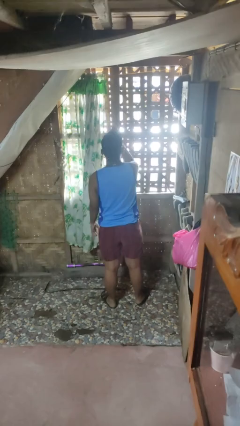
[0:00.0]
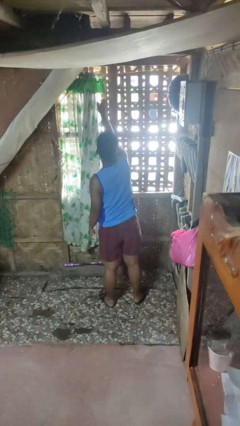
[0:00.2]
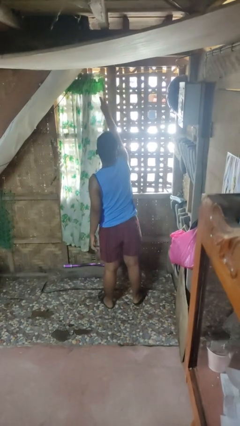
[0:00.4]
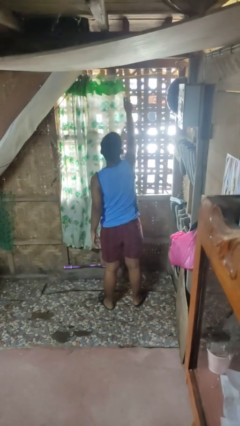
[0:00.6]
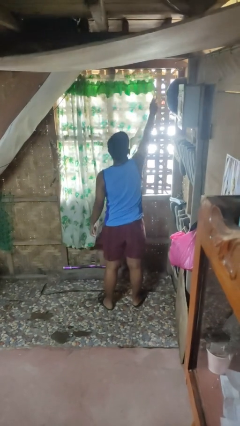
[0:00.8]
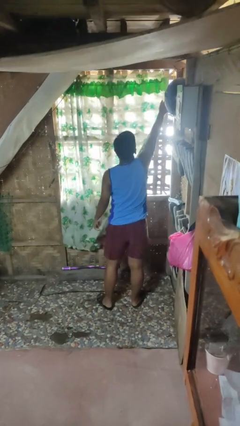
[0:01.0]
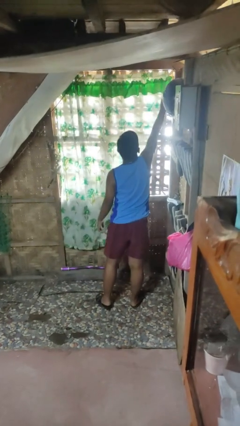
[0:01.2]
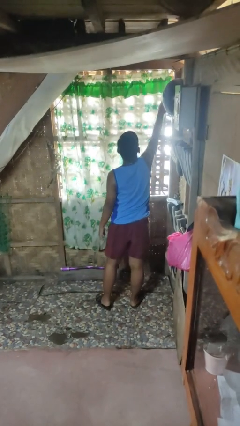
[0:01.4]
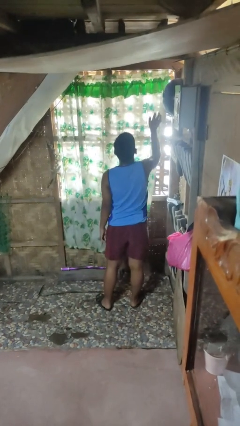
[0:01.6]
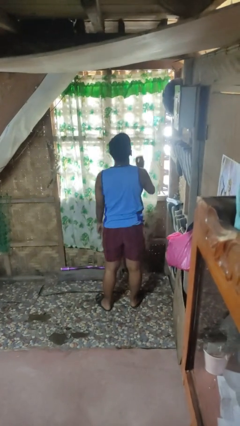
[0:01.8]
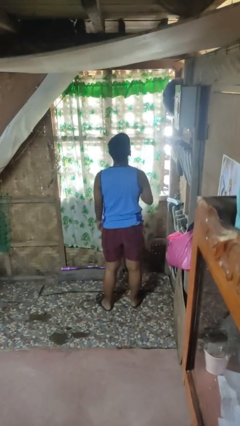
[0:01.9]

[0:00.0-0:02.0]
person closes curtains

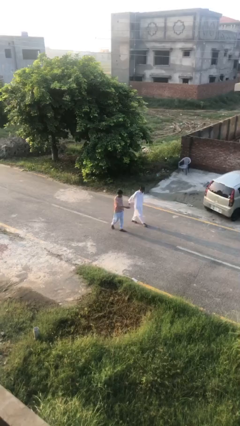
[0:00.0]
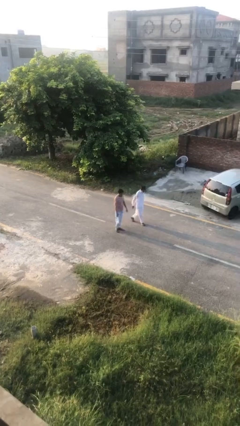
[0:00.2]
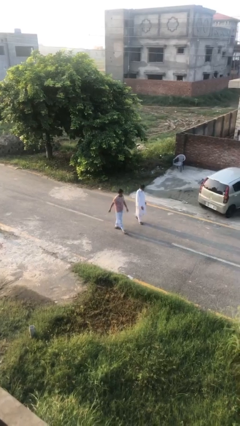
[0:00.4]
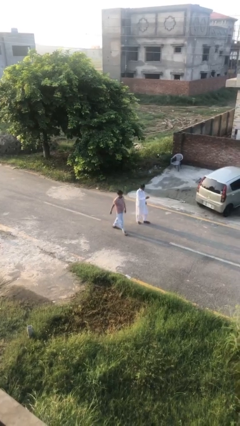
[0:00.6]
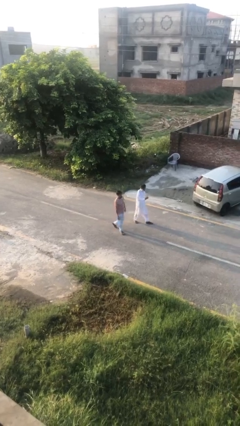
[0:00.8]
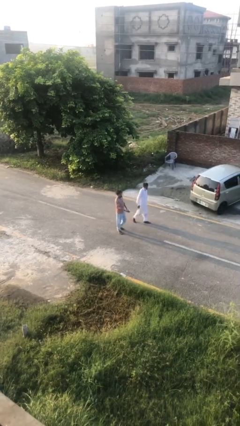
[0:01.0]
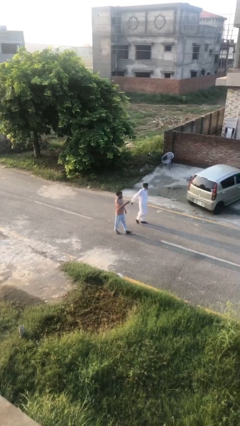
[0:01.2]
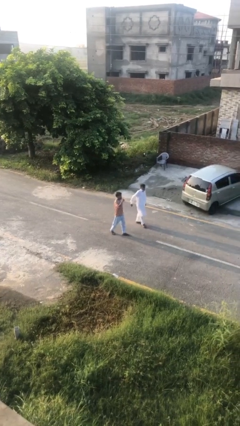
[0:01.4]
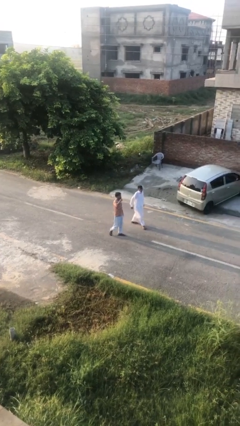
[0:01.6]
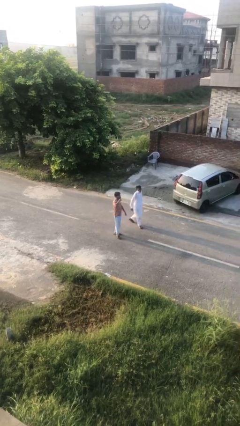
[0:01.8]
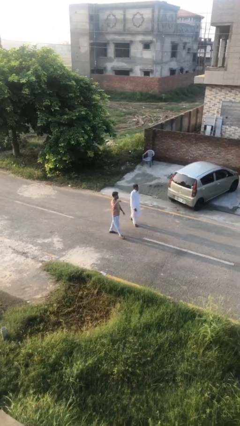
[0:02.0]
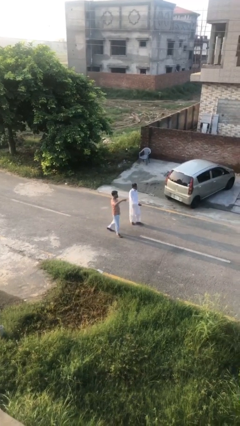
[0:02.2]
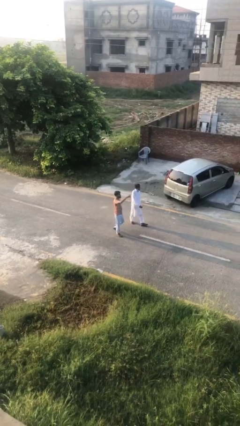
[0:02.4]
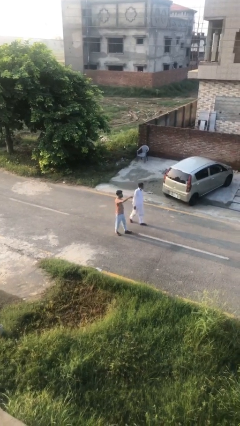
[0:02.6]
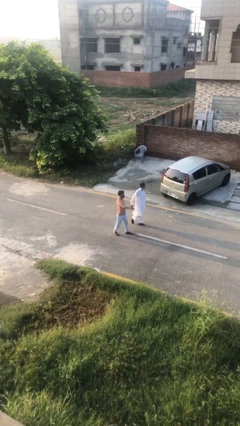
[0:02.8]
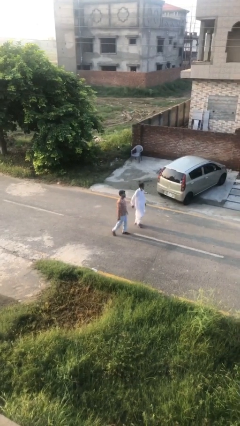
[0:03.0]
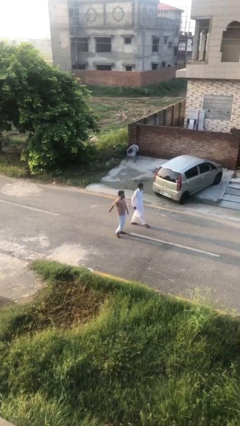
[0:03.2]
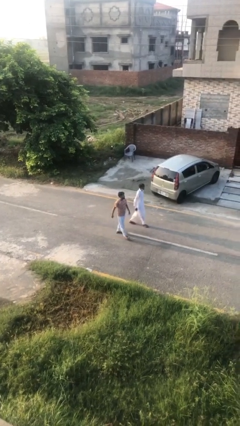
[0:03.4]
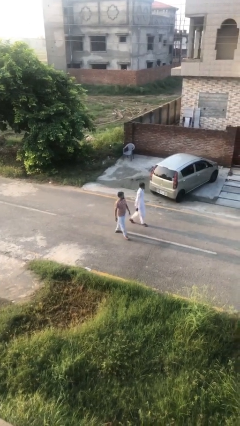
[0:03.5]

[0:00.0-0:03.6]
person talks to person

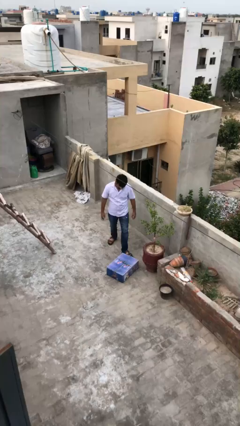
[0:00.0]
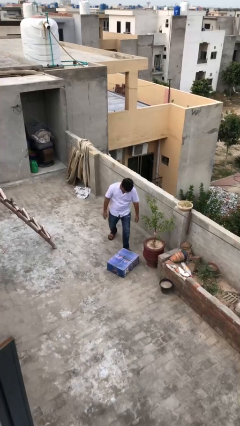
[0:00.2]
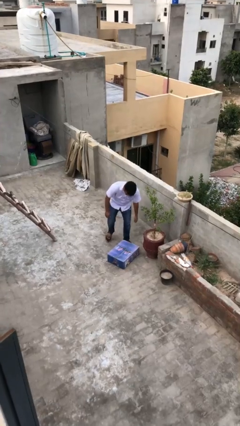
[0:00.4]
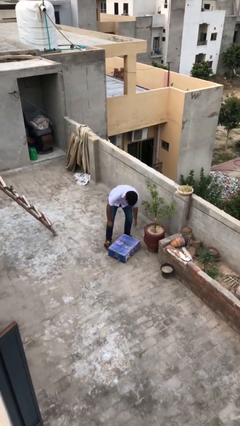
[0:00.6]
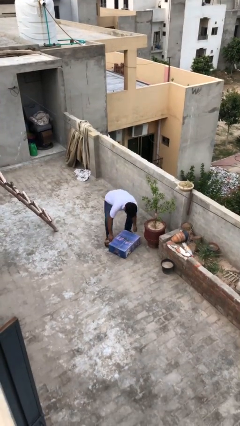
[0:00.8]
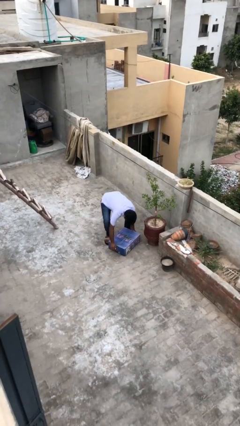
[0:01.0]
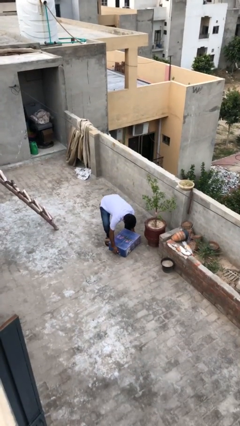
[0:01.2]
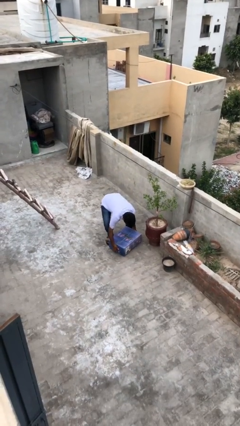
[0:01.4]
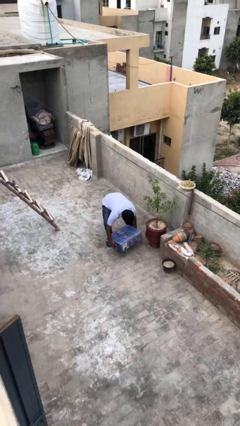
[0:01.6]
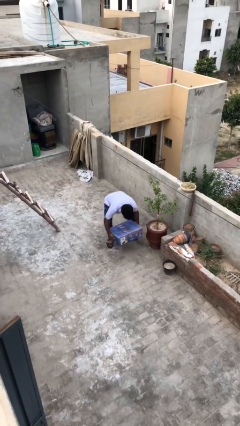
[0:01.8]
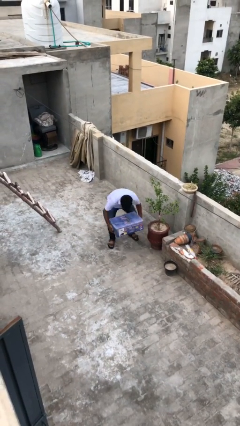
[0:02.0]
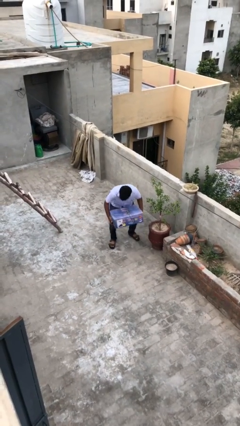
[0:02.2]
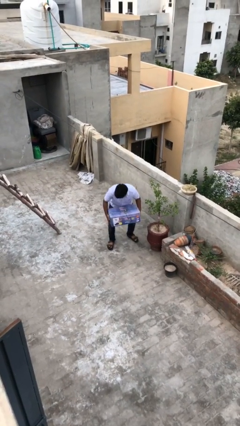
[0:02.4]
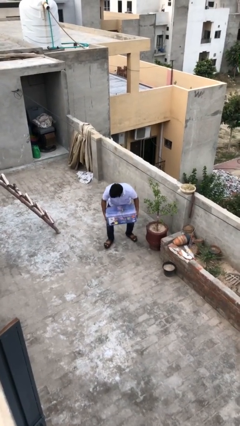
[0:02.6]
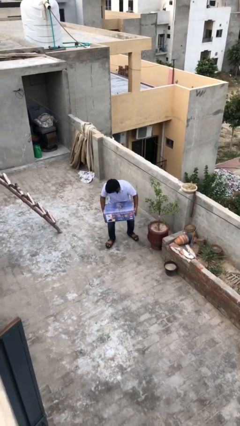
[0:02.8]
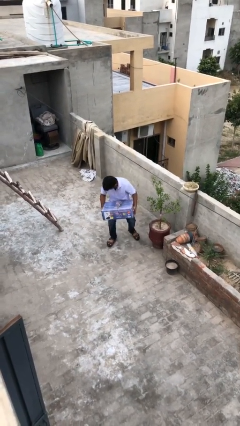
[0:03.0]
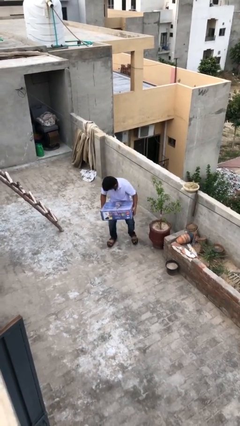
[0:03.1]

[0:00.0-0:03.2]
person picks up object from floor

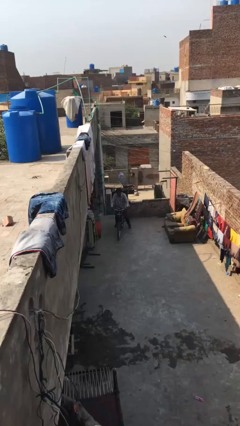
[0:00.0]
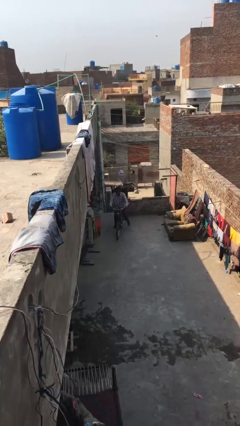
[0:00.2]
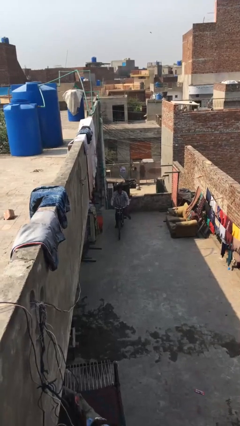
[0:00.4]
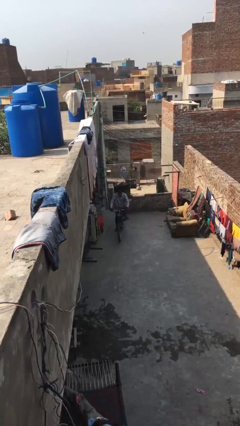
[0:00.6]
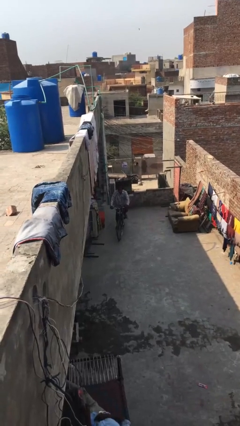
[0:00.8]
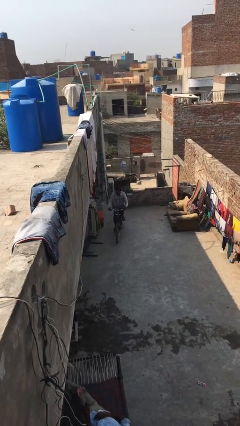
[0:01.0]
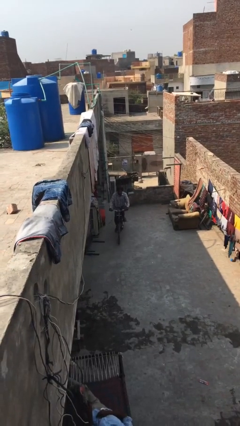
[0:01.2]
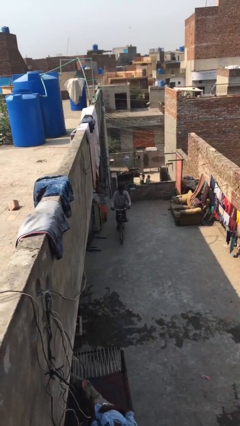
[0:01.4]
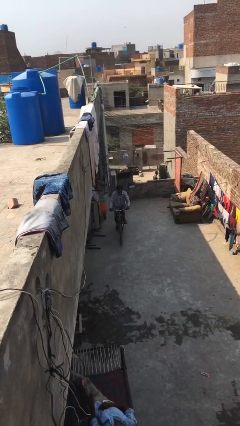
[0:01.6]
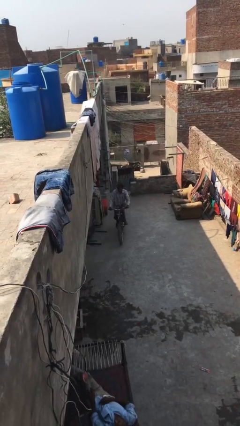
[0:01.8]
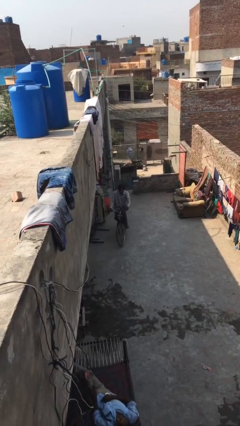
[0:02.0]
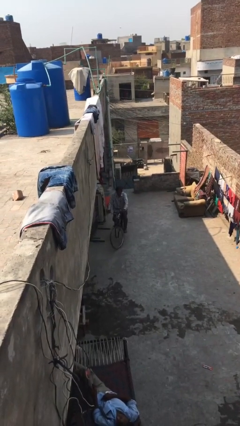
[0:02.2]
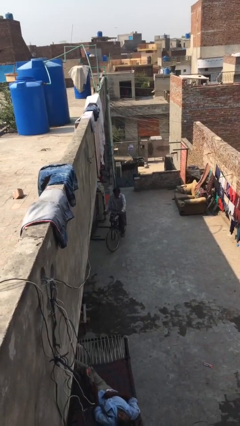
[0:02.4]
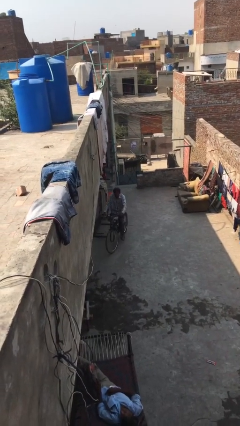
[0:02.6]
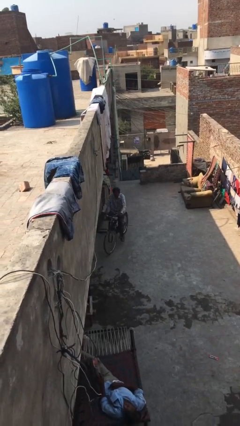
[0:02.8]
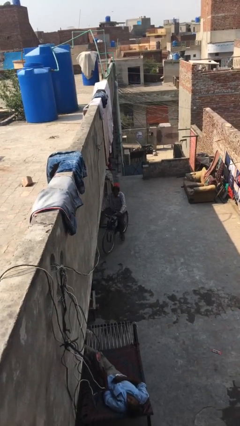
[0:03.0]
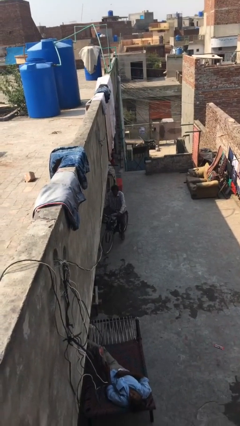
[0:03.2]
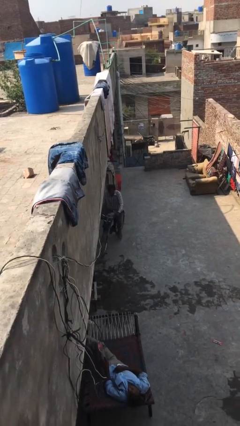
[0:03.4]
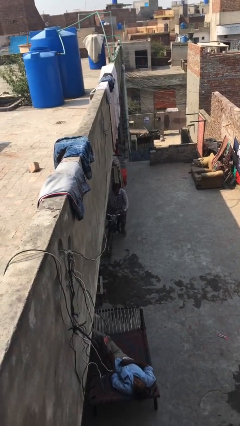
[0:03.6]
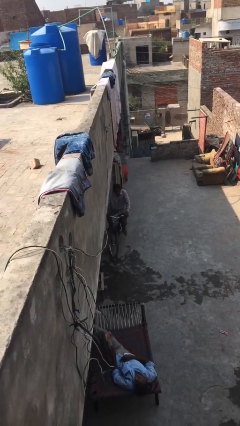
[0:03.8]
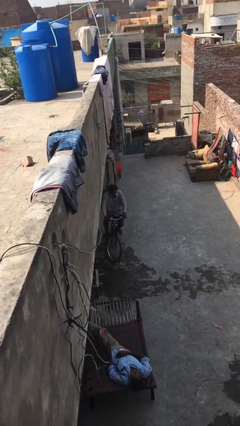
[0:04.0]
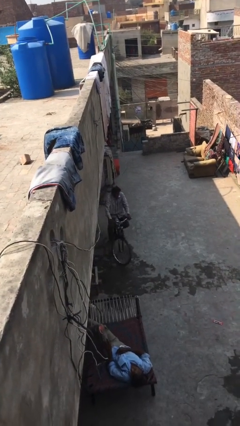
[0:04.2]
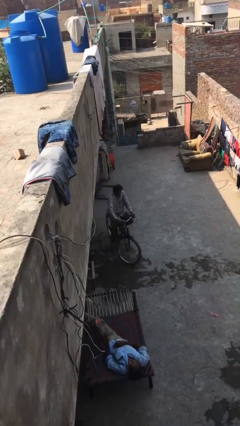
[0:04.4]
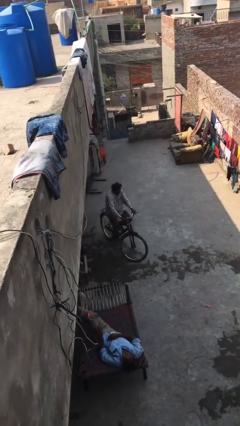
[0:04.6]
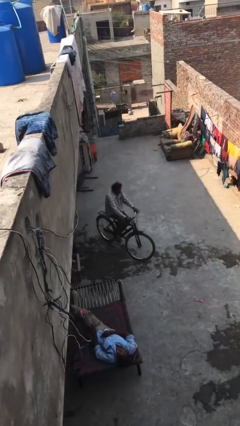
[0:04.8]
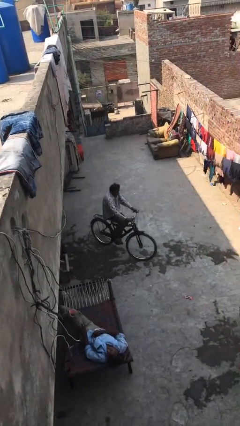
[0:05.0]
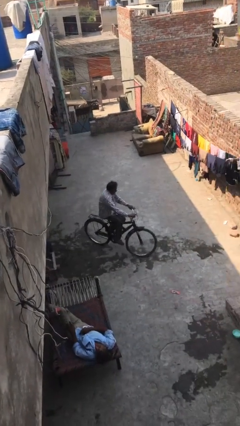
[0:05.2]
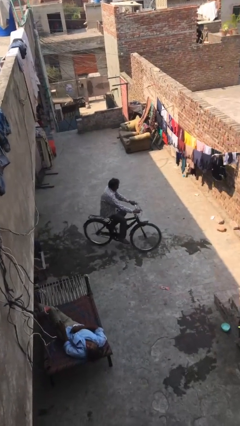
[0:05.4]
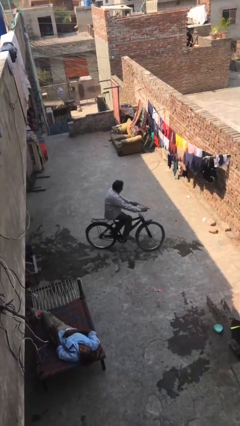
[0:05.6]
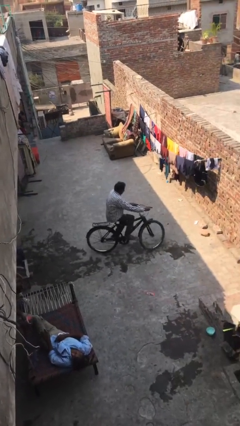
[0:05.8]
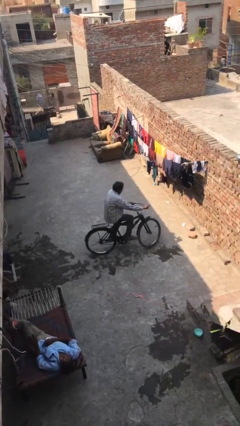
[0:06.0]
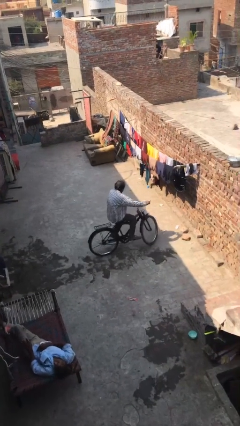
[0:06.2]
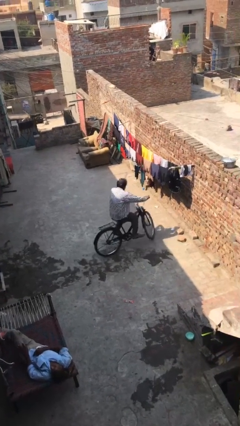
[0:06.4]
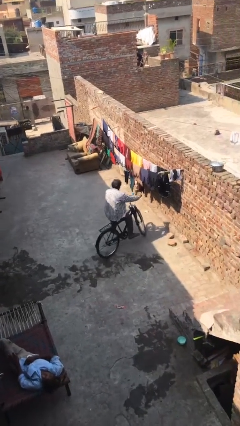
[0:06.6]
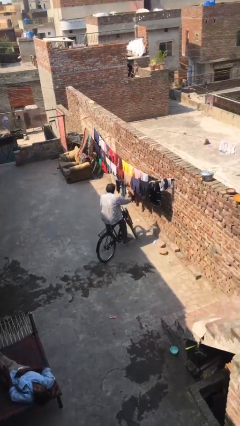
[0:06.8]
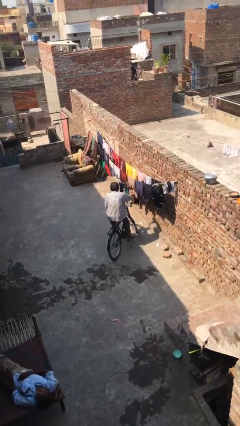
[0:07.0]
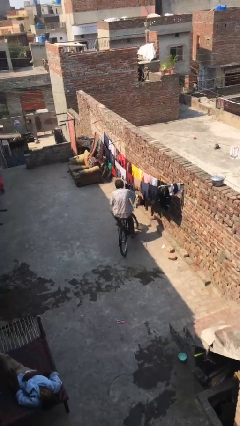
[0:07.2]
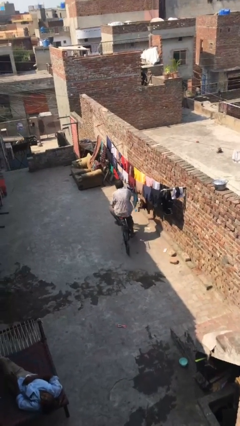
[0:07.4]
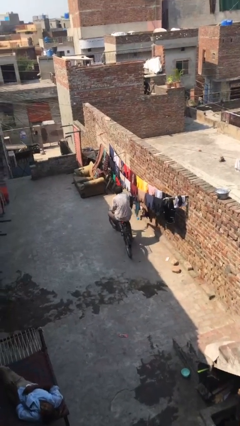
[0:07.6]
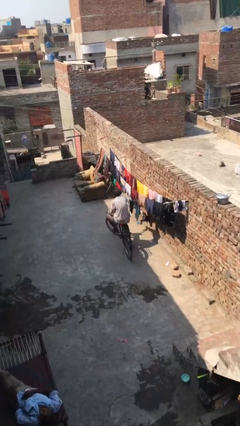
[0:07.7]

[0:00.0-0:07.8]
person rides bicycle

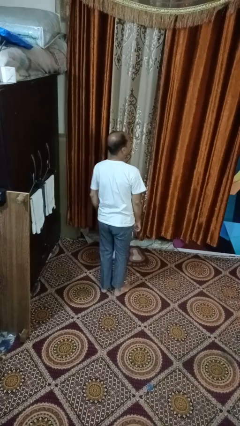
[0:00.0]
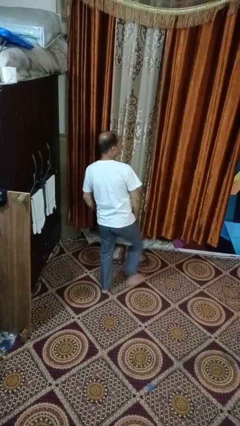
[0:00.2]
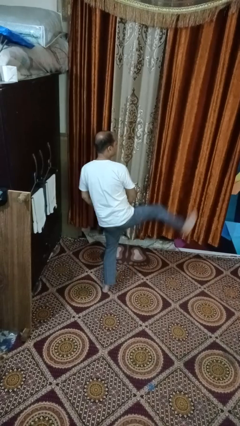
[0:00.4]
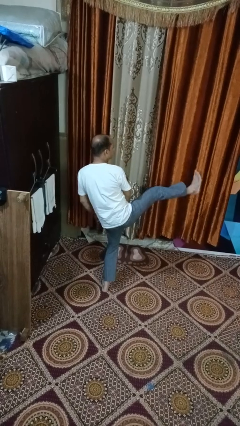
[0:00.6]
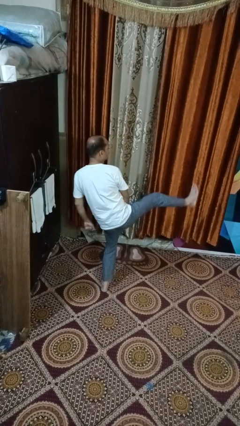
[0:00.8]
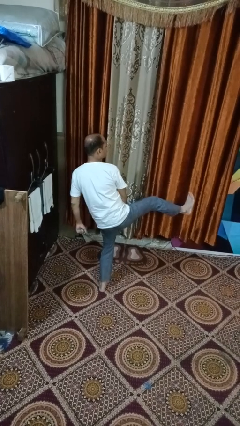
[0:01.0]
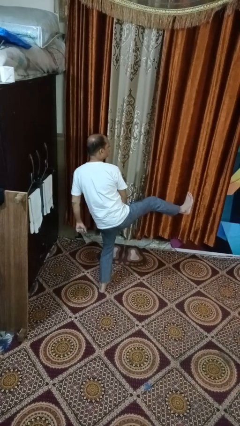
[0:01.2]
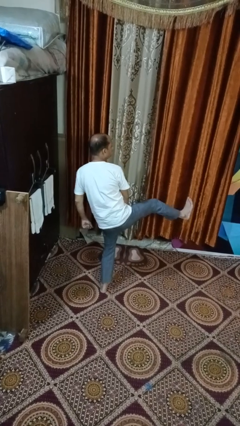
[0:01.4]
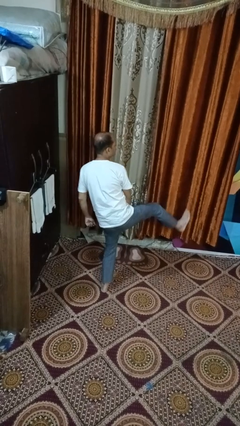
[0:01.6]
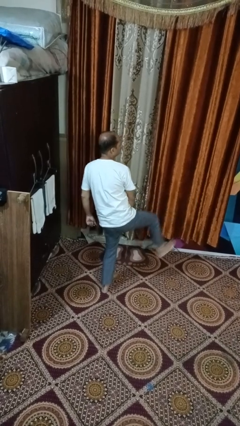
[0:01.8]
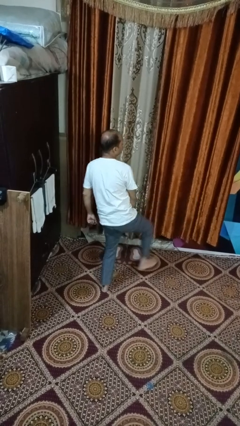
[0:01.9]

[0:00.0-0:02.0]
person karate kicks
